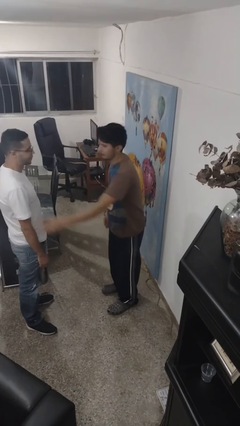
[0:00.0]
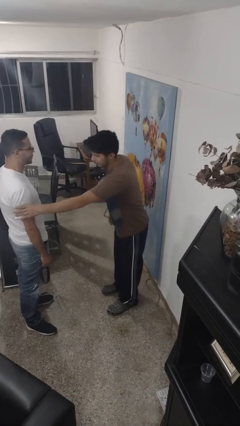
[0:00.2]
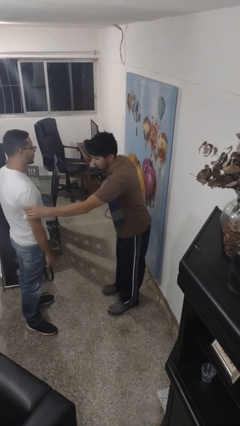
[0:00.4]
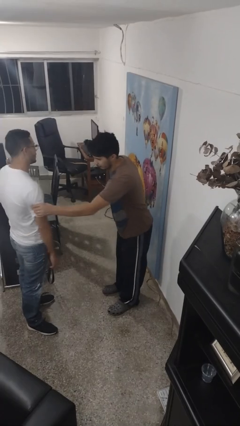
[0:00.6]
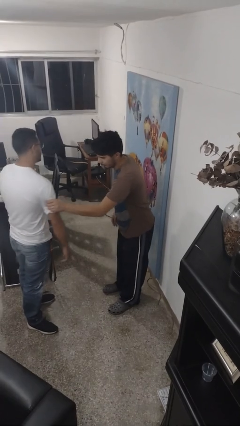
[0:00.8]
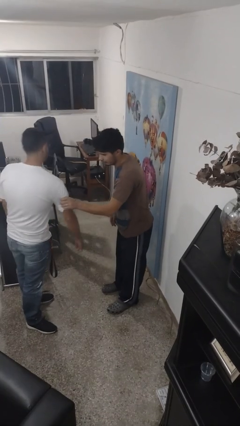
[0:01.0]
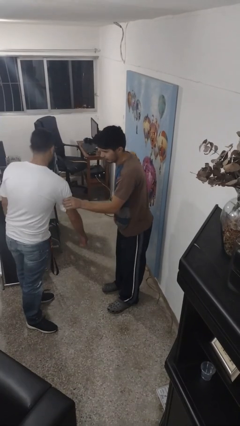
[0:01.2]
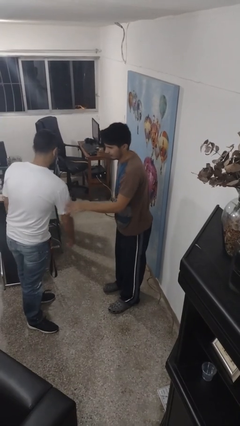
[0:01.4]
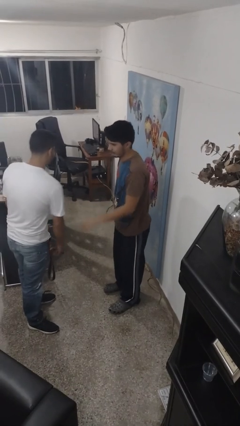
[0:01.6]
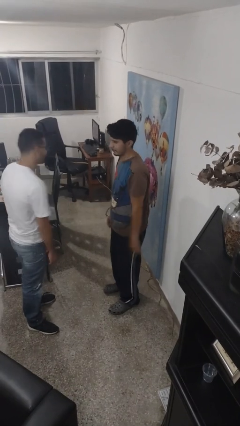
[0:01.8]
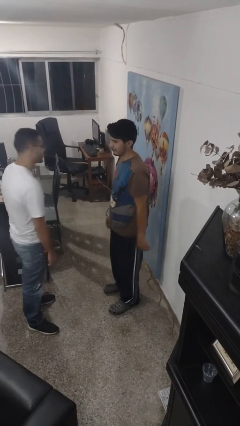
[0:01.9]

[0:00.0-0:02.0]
person grabs person by bicep

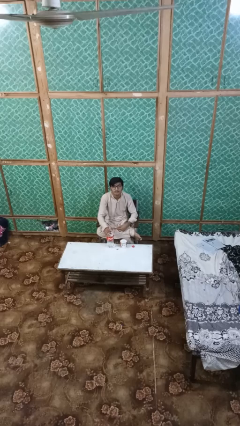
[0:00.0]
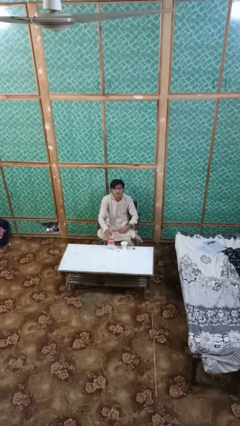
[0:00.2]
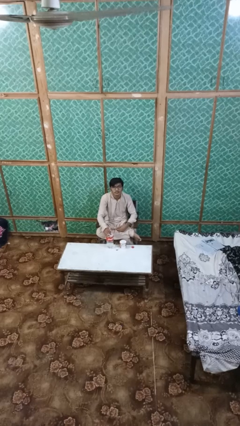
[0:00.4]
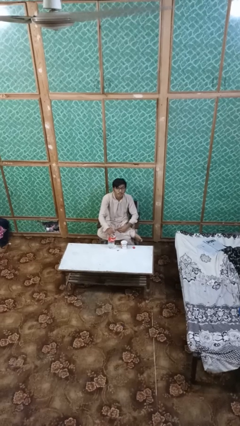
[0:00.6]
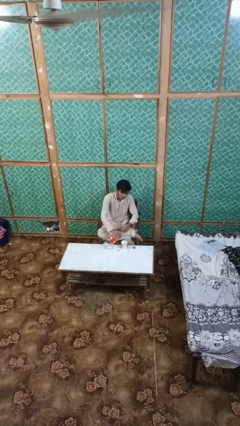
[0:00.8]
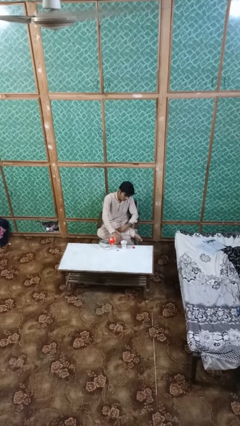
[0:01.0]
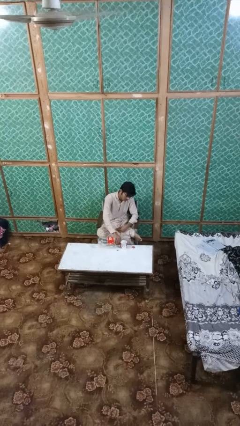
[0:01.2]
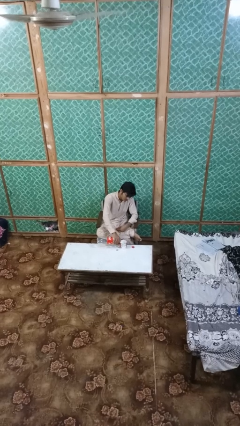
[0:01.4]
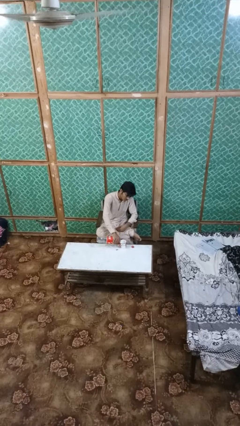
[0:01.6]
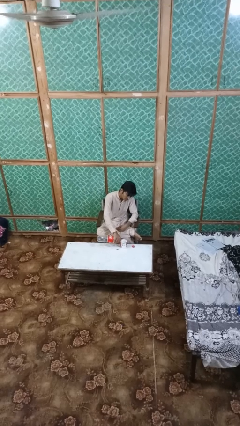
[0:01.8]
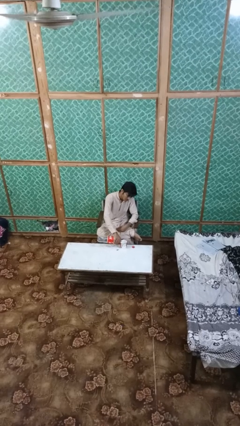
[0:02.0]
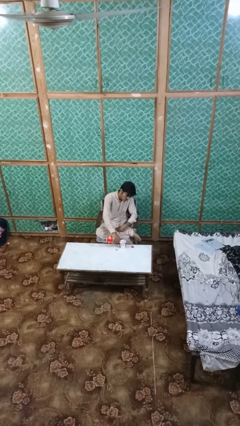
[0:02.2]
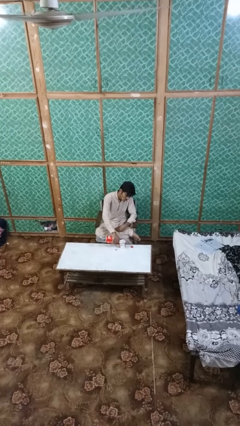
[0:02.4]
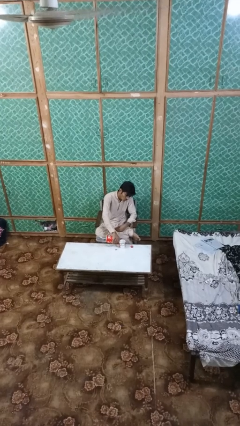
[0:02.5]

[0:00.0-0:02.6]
person pours liquid into cup

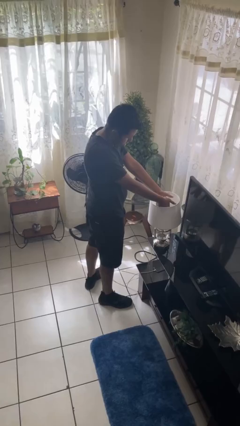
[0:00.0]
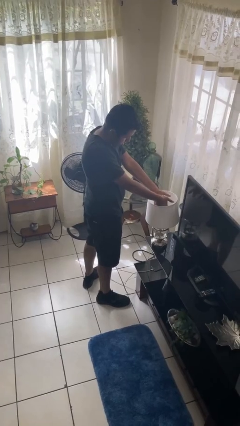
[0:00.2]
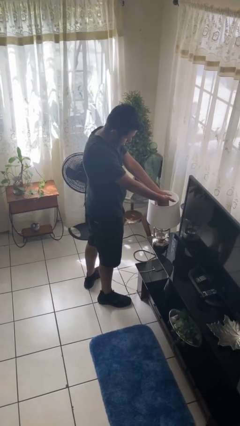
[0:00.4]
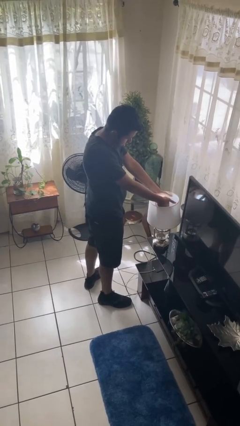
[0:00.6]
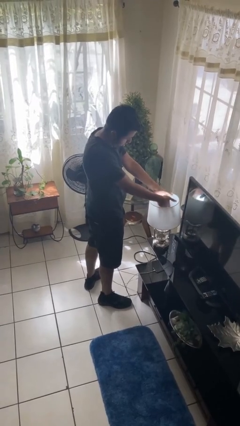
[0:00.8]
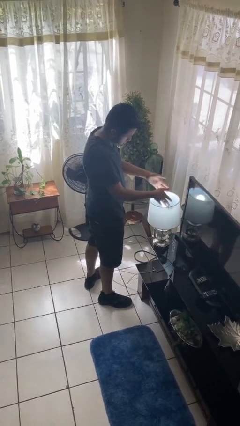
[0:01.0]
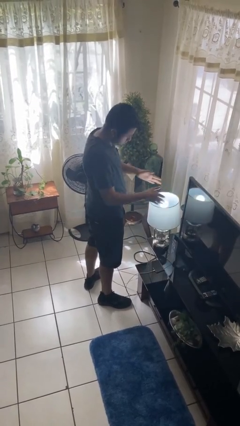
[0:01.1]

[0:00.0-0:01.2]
person turns on lamp

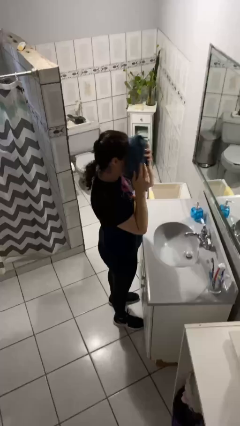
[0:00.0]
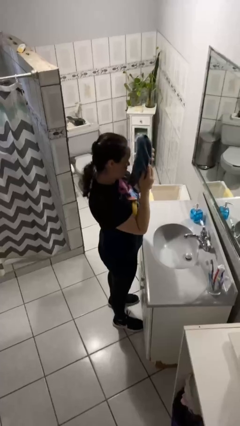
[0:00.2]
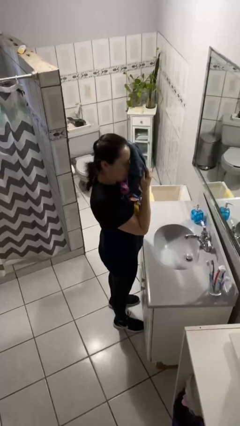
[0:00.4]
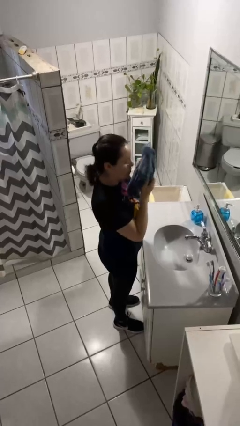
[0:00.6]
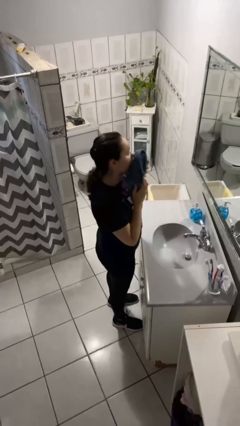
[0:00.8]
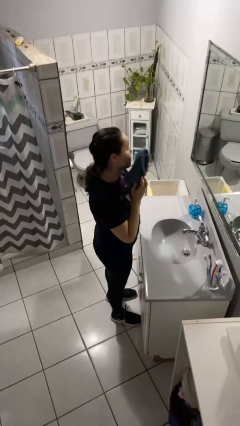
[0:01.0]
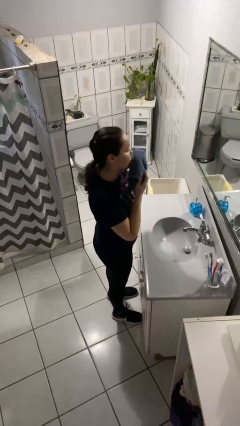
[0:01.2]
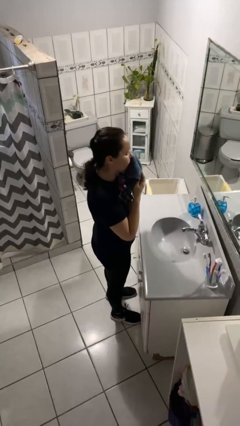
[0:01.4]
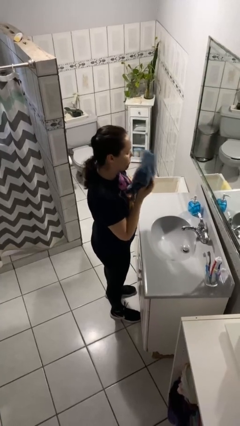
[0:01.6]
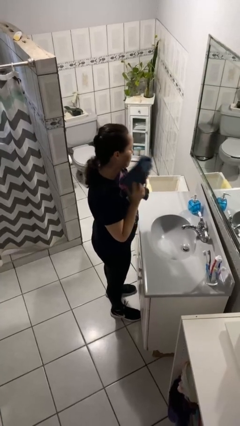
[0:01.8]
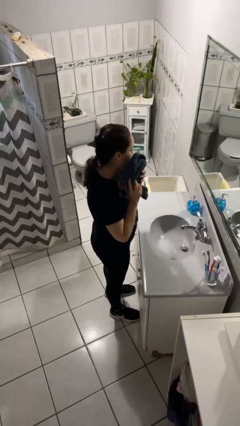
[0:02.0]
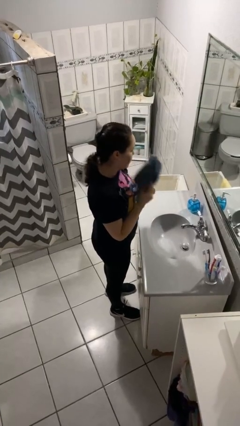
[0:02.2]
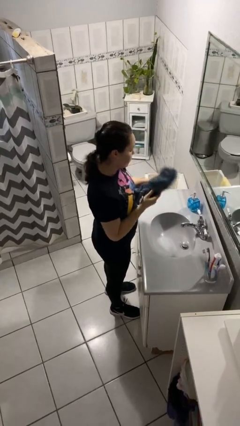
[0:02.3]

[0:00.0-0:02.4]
person dries face with towel

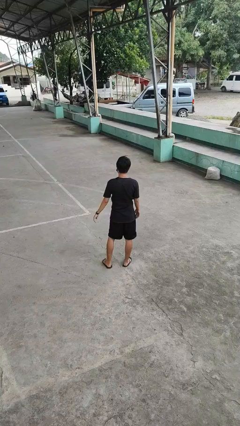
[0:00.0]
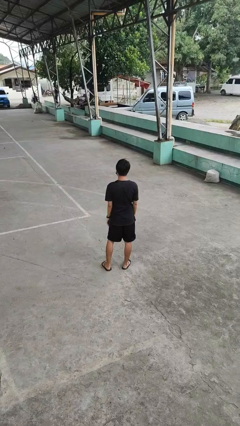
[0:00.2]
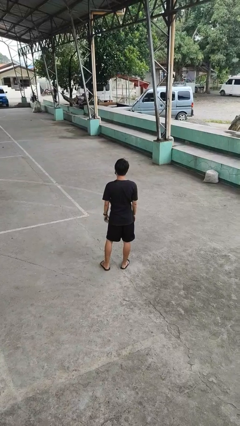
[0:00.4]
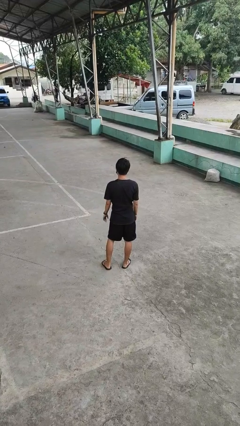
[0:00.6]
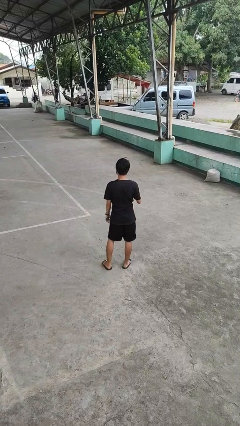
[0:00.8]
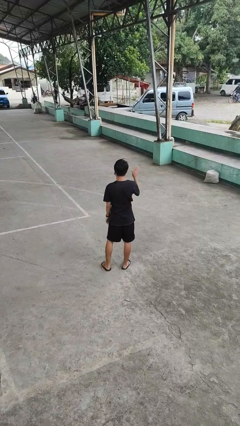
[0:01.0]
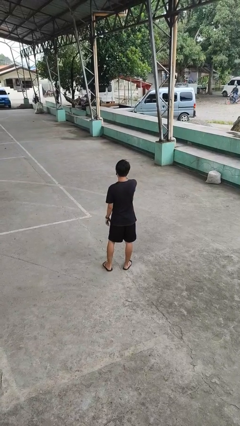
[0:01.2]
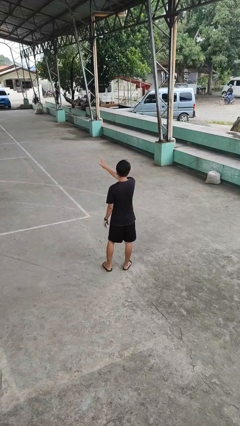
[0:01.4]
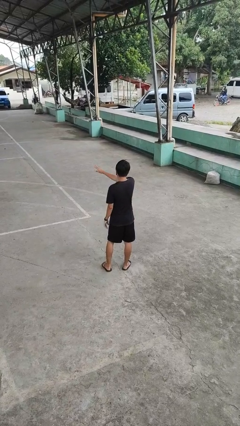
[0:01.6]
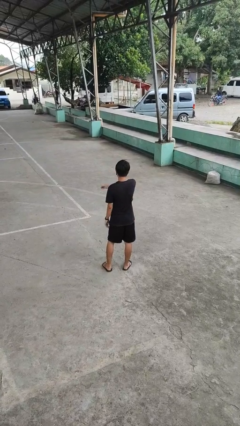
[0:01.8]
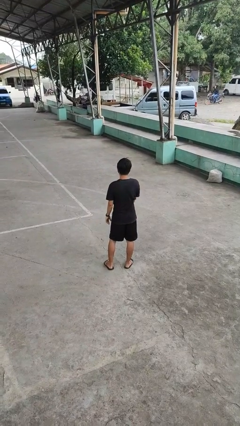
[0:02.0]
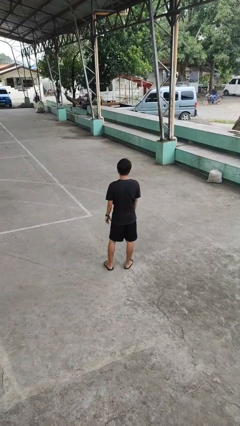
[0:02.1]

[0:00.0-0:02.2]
person gestures swipe left

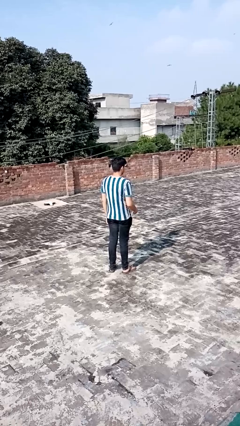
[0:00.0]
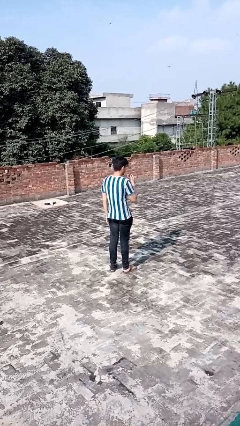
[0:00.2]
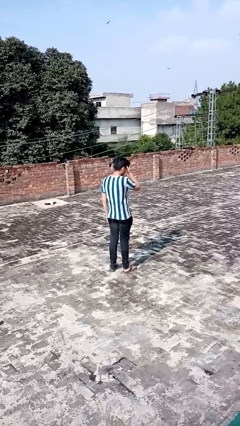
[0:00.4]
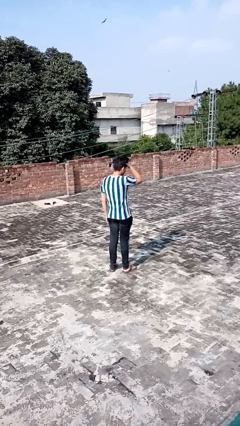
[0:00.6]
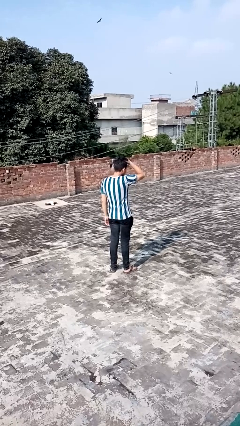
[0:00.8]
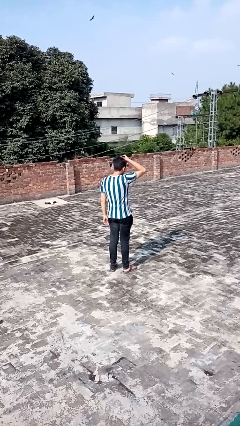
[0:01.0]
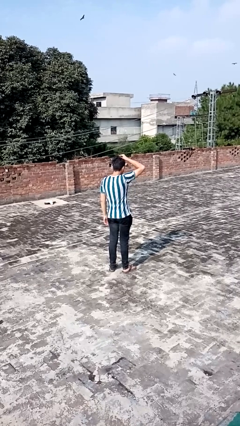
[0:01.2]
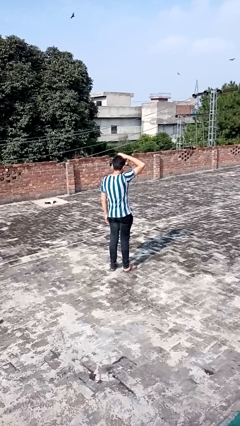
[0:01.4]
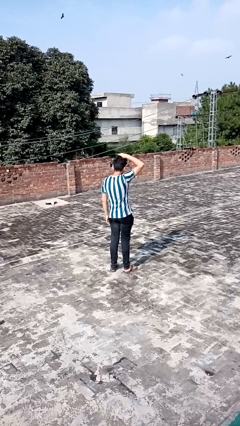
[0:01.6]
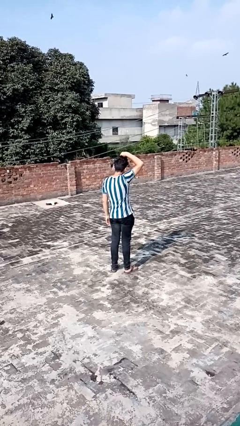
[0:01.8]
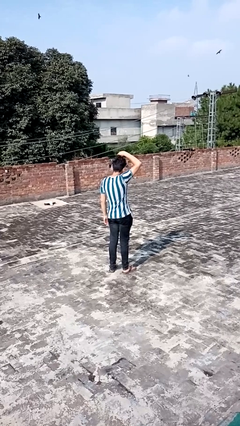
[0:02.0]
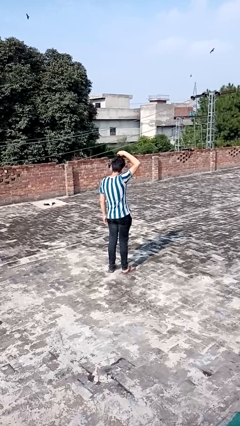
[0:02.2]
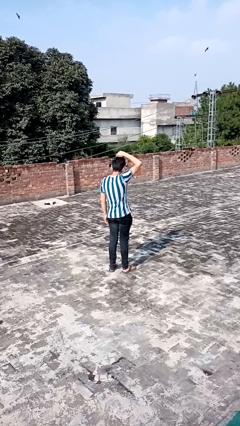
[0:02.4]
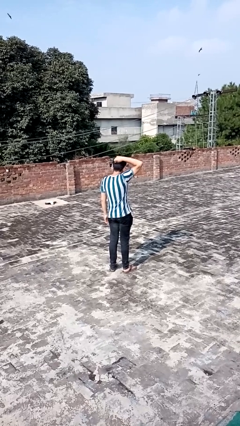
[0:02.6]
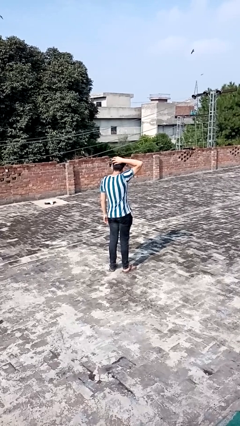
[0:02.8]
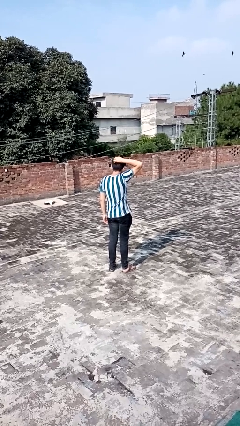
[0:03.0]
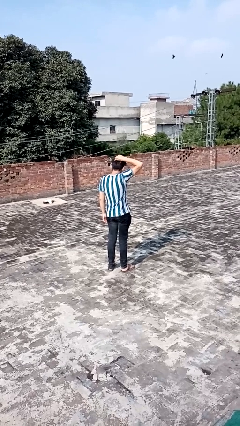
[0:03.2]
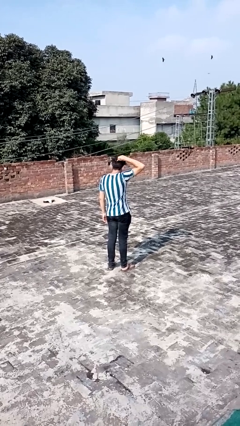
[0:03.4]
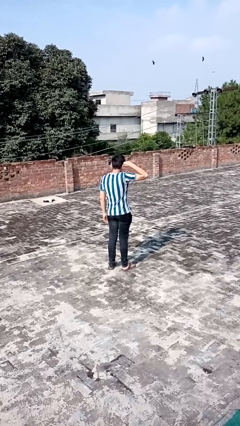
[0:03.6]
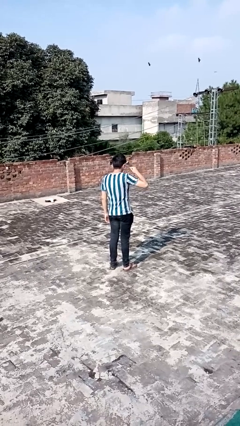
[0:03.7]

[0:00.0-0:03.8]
person strokes hair

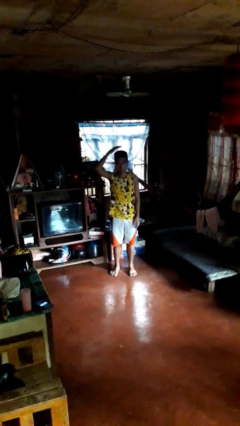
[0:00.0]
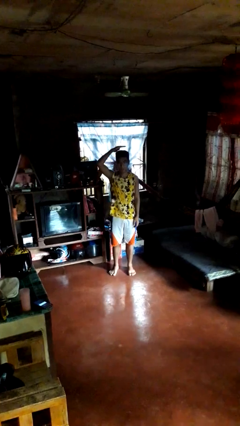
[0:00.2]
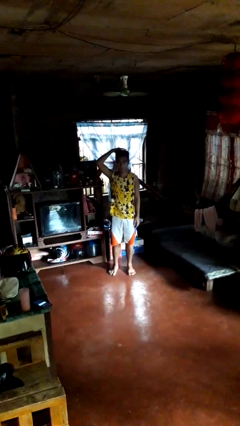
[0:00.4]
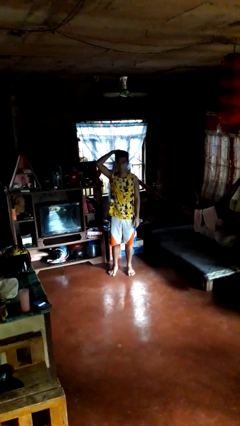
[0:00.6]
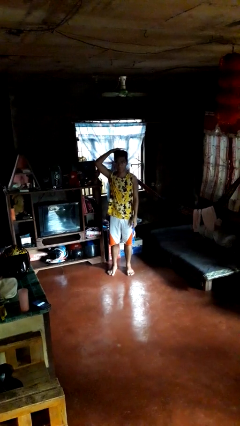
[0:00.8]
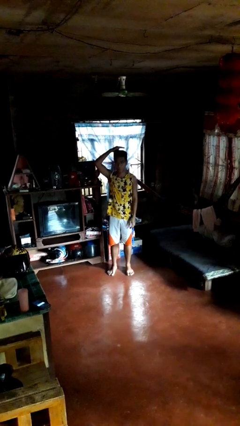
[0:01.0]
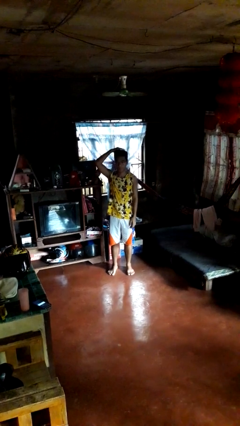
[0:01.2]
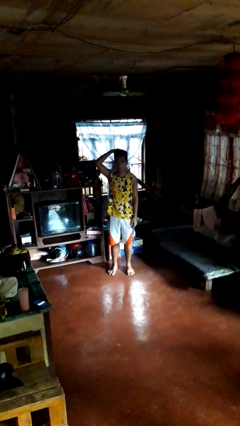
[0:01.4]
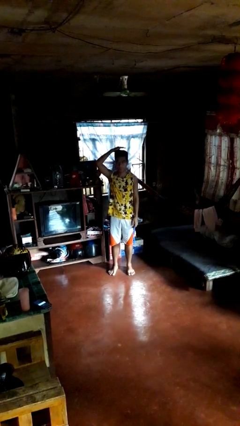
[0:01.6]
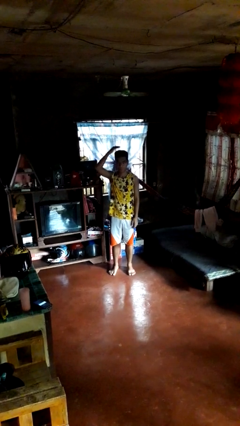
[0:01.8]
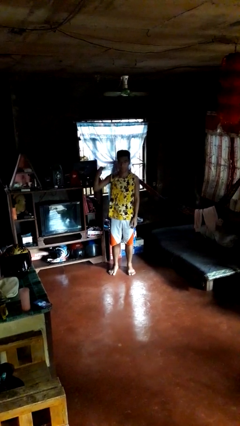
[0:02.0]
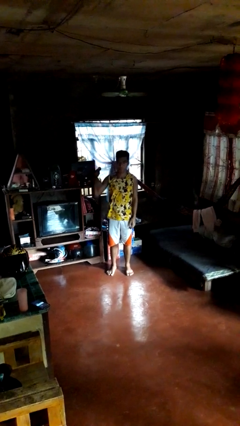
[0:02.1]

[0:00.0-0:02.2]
person pats head

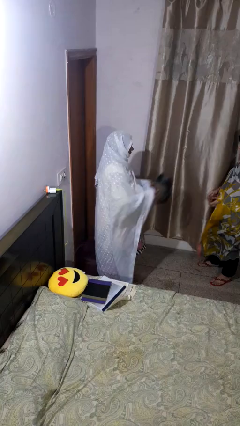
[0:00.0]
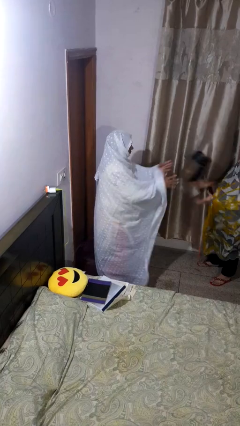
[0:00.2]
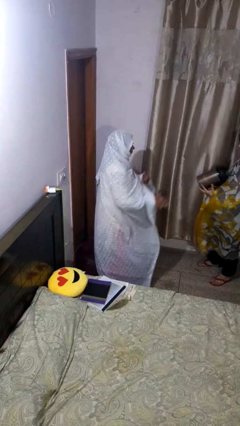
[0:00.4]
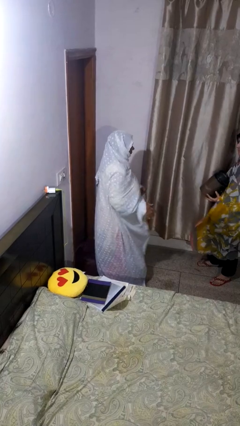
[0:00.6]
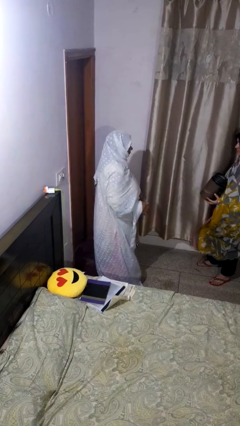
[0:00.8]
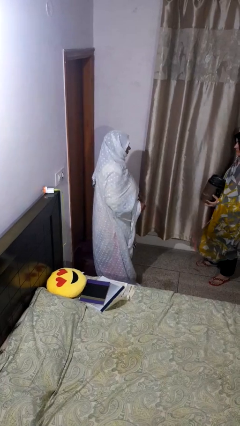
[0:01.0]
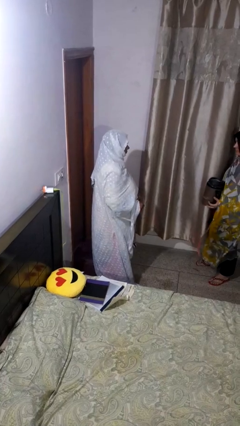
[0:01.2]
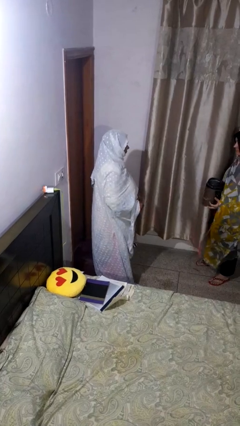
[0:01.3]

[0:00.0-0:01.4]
person throws object to person
